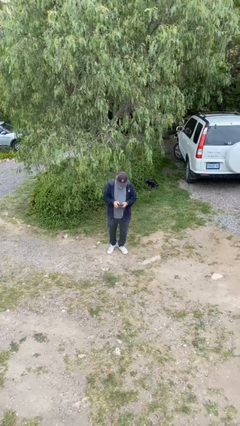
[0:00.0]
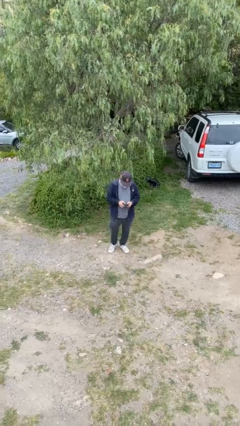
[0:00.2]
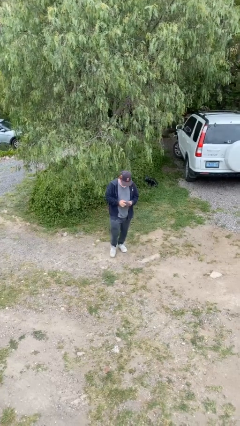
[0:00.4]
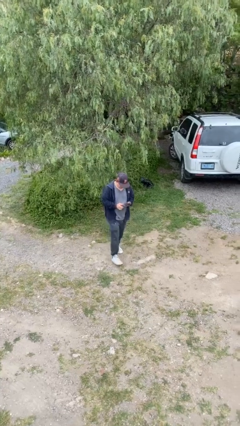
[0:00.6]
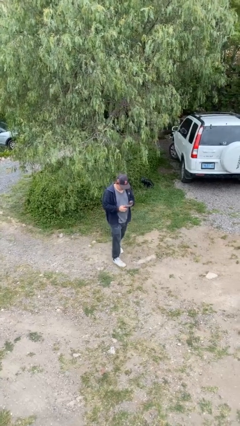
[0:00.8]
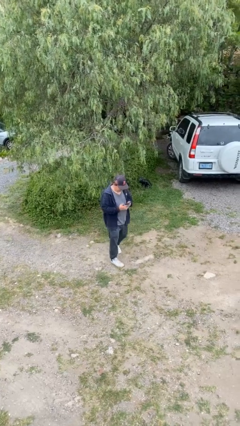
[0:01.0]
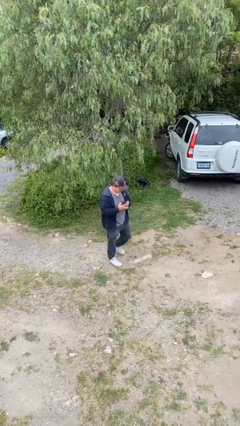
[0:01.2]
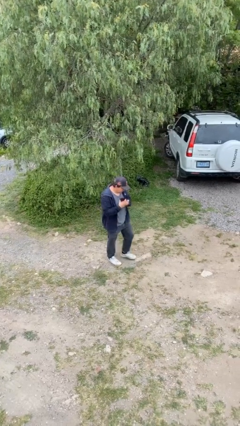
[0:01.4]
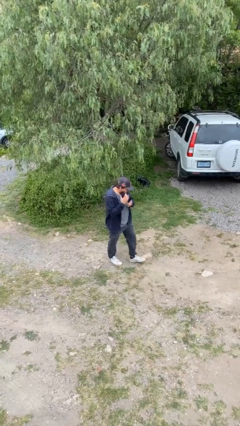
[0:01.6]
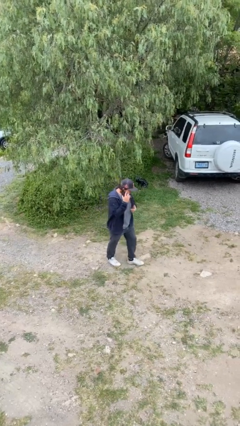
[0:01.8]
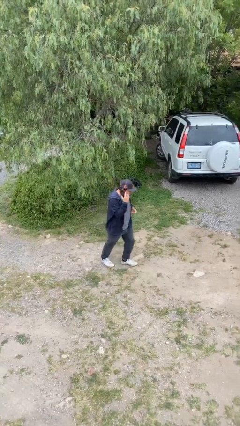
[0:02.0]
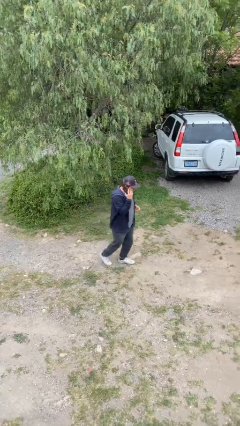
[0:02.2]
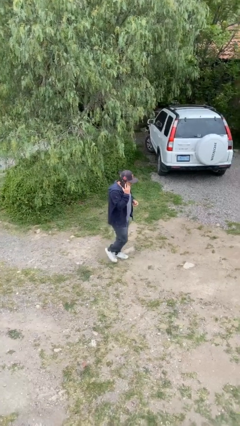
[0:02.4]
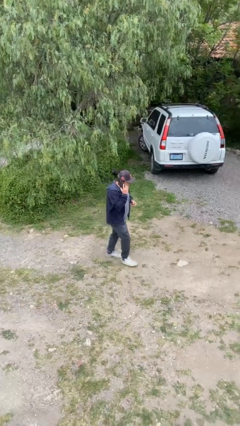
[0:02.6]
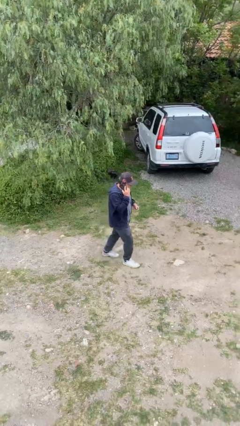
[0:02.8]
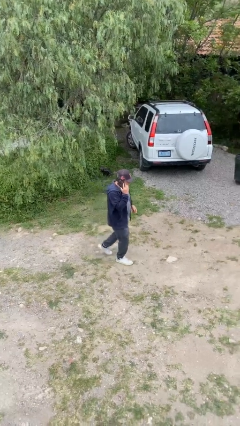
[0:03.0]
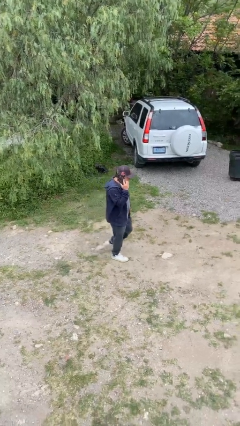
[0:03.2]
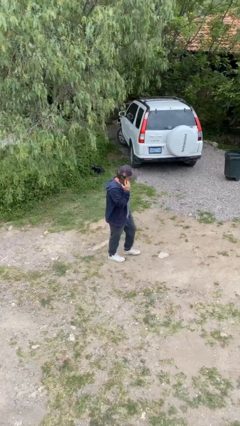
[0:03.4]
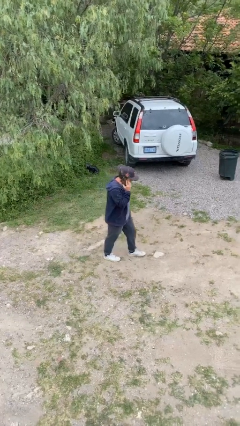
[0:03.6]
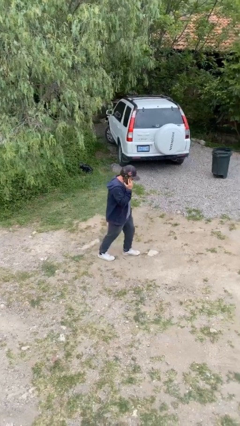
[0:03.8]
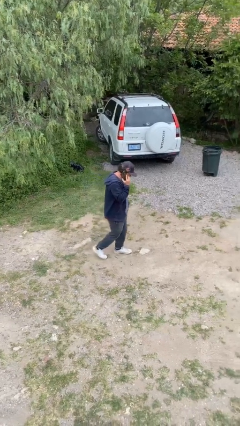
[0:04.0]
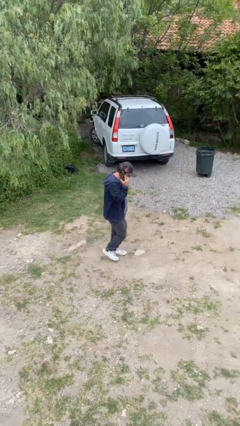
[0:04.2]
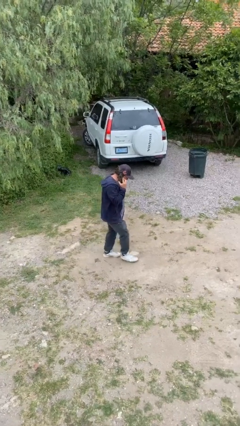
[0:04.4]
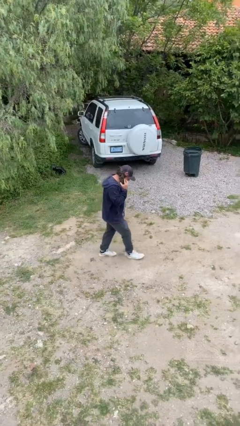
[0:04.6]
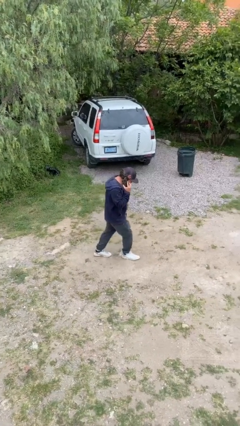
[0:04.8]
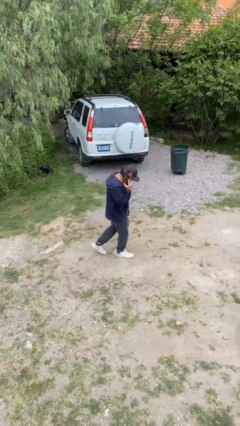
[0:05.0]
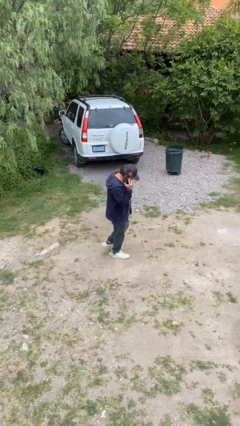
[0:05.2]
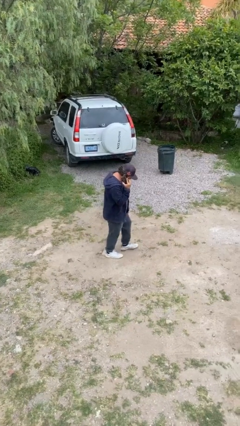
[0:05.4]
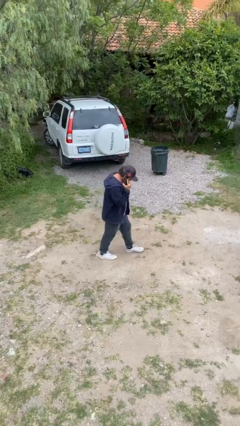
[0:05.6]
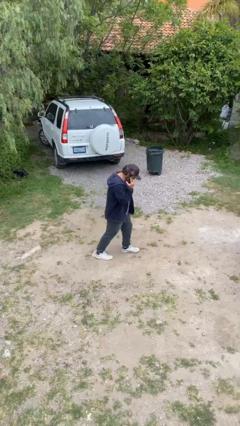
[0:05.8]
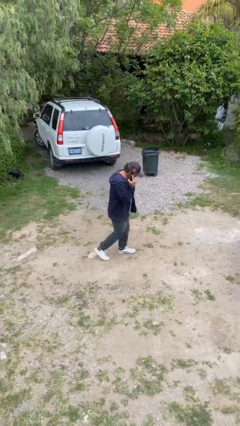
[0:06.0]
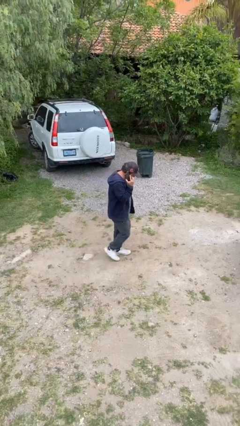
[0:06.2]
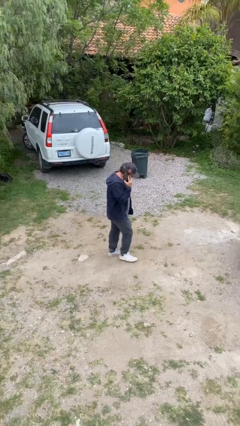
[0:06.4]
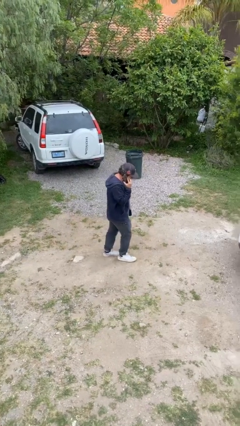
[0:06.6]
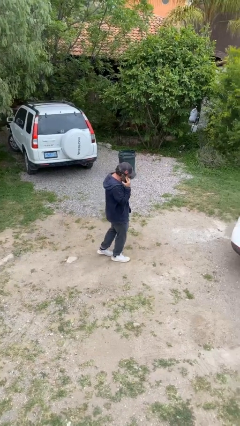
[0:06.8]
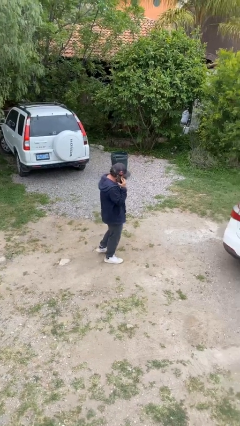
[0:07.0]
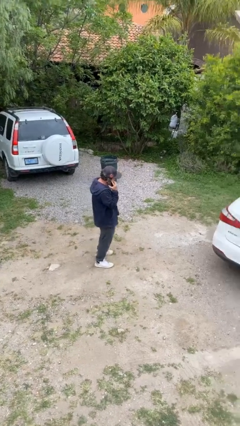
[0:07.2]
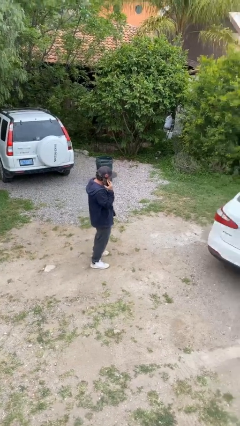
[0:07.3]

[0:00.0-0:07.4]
person talks on phone

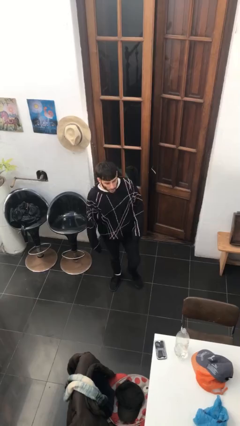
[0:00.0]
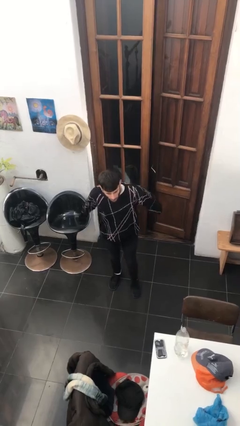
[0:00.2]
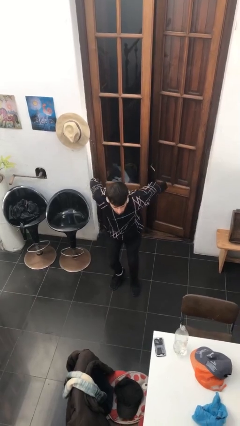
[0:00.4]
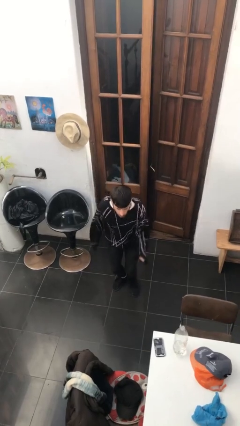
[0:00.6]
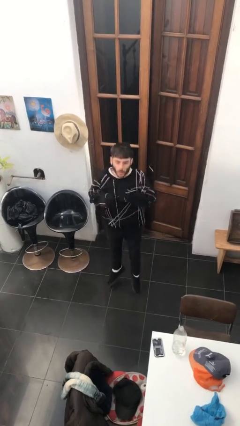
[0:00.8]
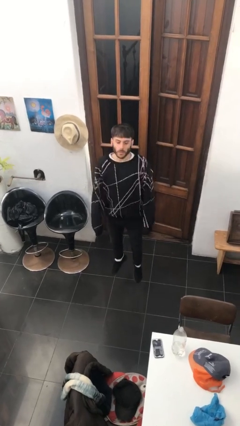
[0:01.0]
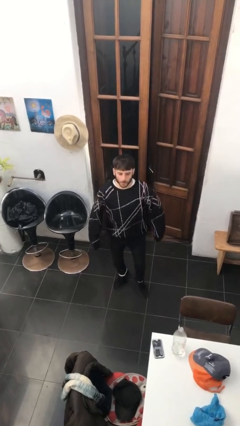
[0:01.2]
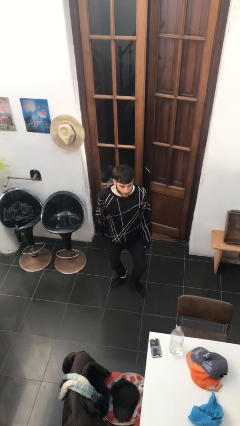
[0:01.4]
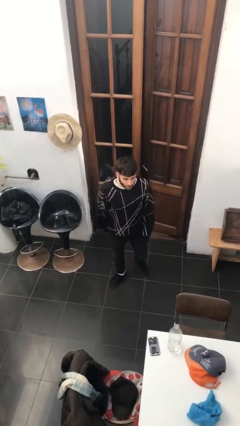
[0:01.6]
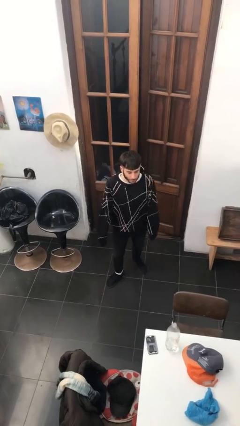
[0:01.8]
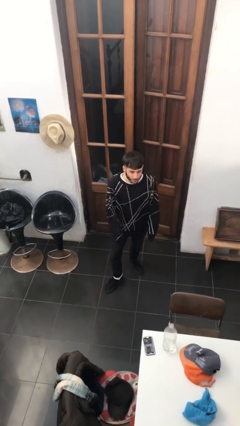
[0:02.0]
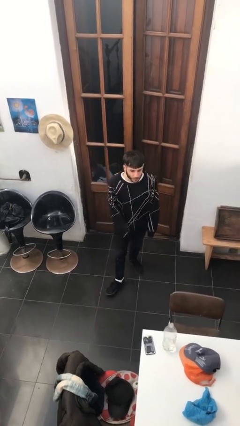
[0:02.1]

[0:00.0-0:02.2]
person jumps

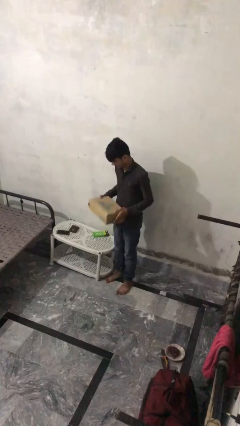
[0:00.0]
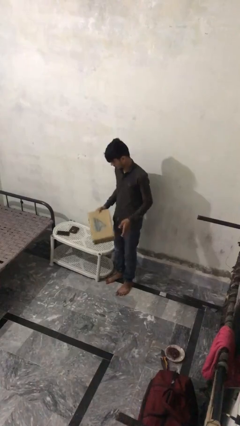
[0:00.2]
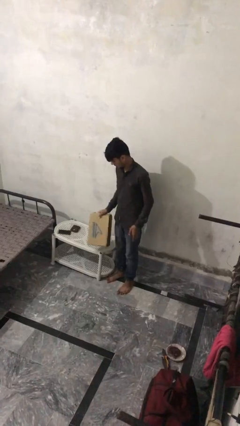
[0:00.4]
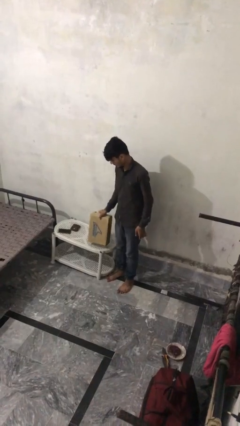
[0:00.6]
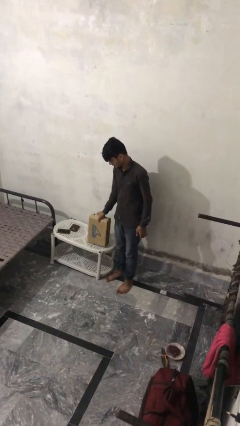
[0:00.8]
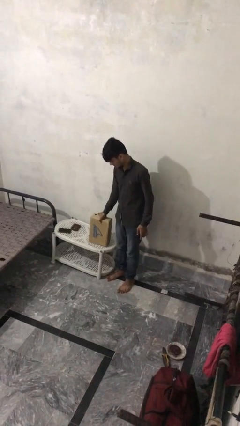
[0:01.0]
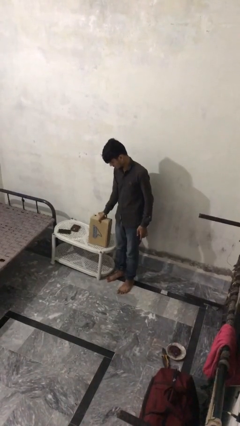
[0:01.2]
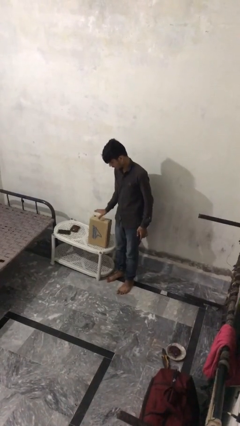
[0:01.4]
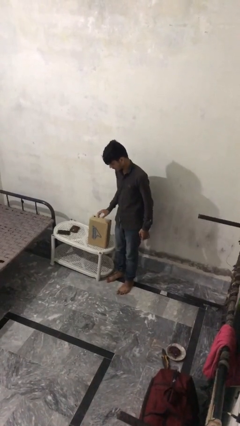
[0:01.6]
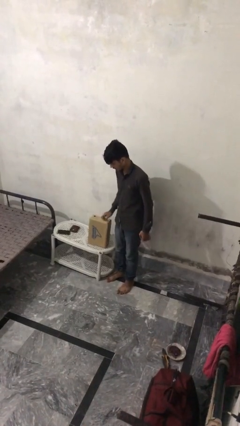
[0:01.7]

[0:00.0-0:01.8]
person puts down object on table

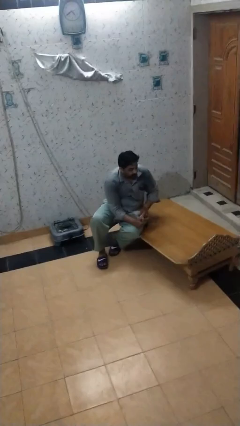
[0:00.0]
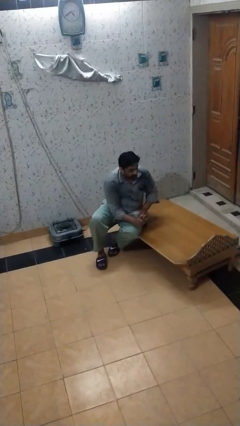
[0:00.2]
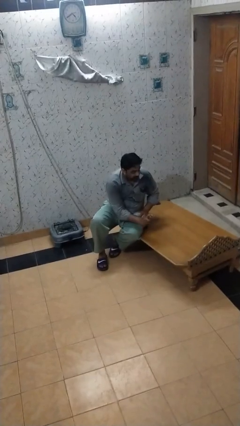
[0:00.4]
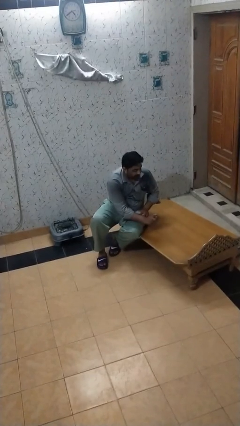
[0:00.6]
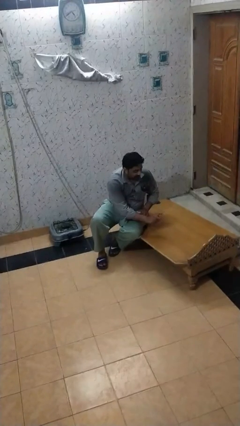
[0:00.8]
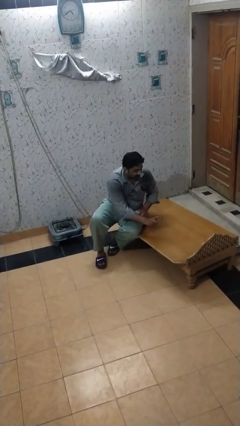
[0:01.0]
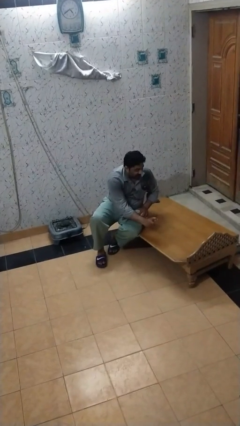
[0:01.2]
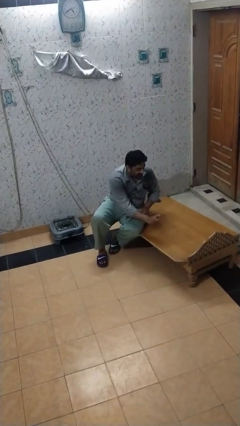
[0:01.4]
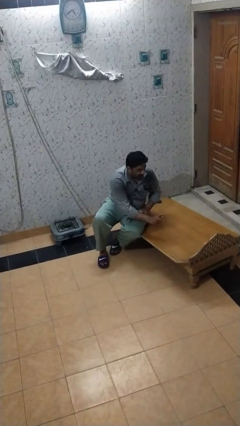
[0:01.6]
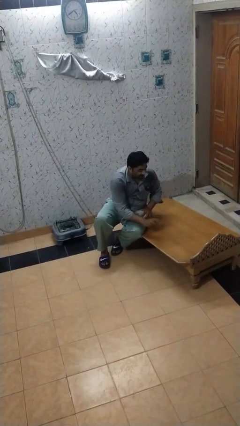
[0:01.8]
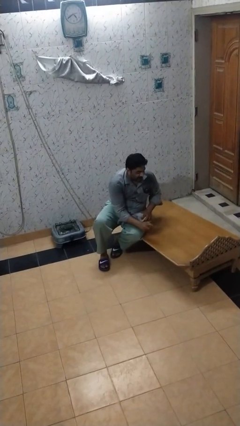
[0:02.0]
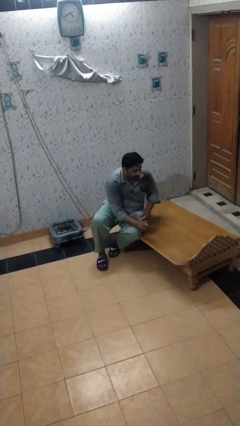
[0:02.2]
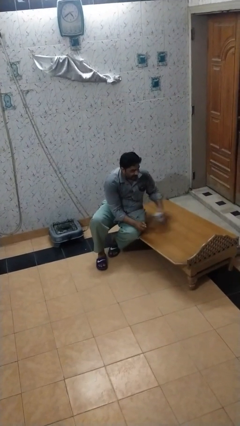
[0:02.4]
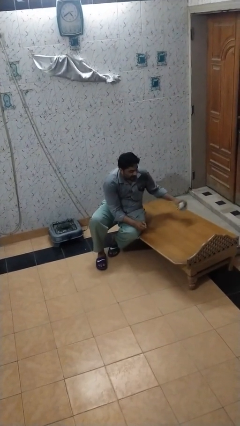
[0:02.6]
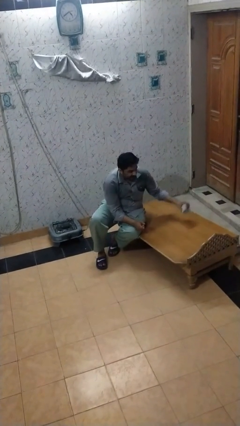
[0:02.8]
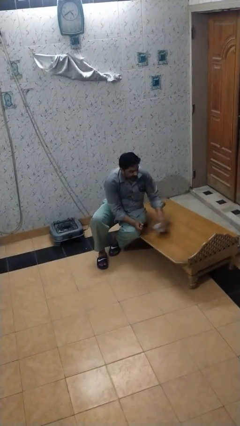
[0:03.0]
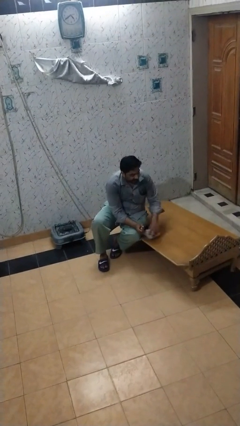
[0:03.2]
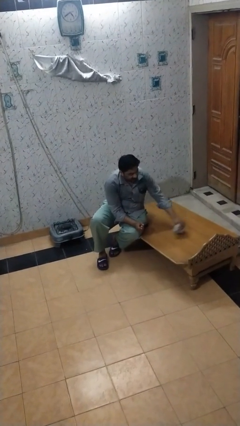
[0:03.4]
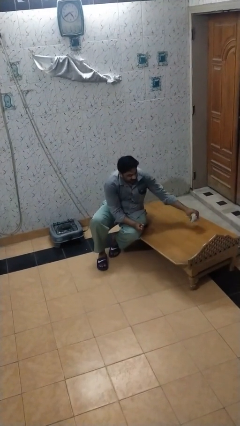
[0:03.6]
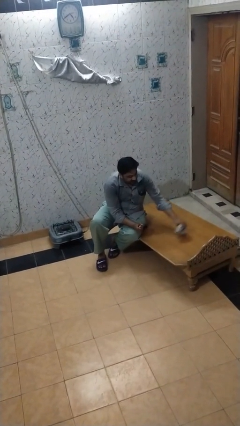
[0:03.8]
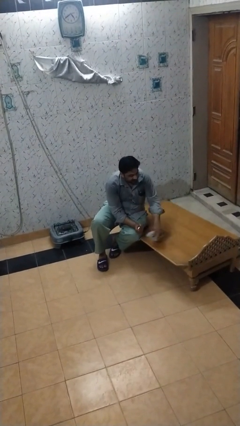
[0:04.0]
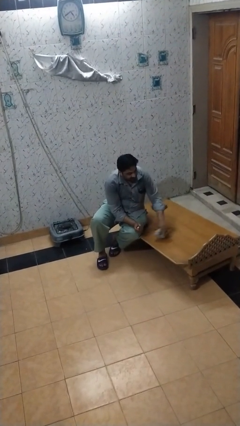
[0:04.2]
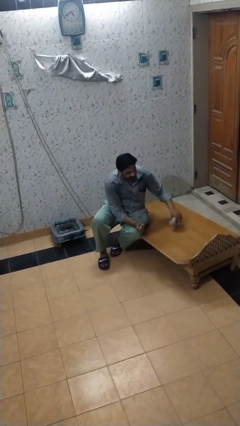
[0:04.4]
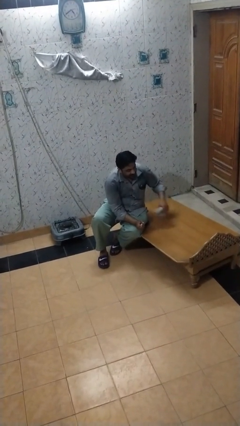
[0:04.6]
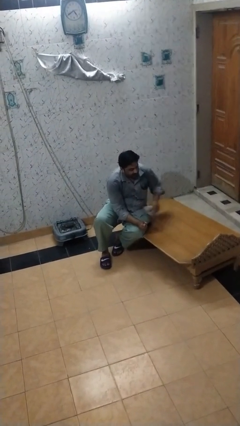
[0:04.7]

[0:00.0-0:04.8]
person sprays from bottle

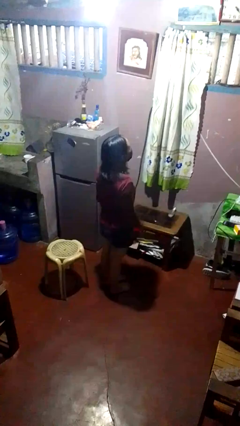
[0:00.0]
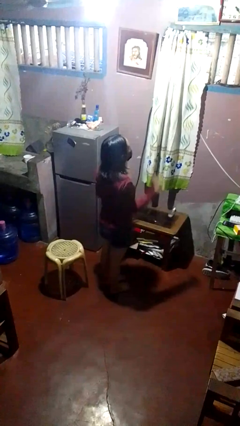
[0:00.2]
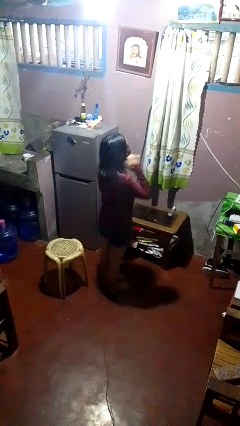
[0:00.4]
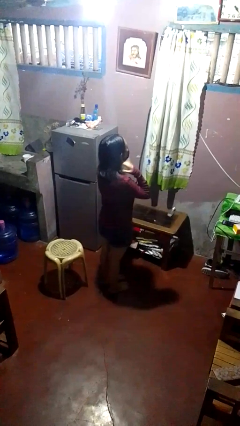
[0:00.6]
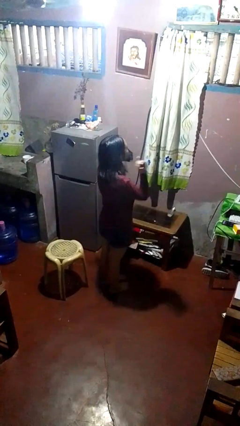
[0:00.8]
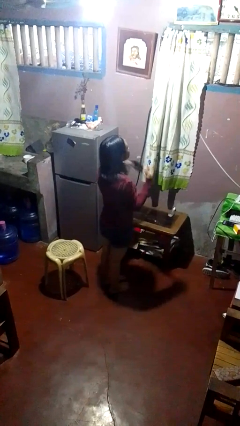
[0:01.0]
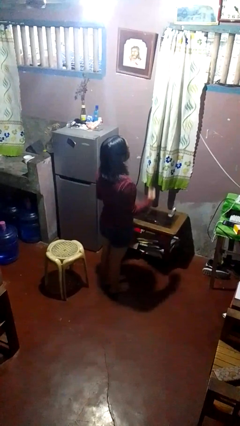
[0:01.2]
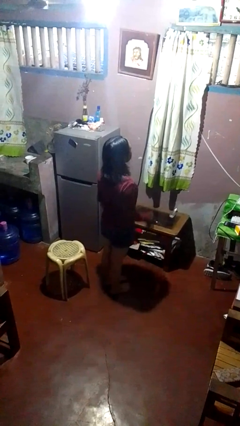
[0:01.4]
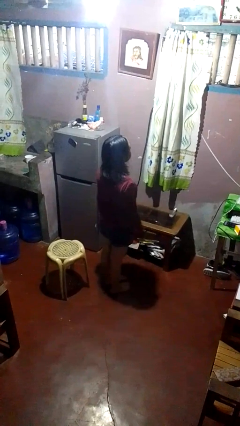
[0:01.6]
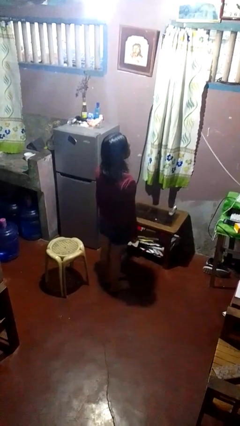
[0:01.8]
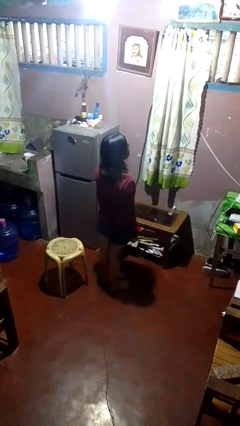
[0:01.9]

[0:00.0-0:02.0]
person takes off facemask
